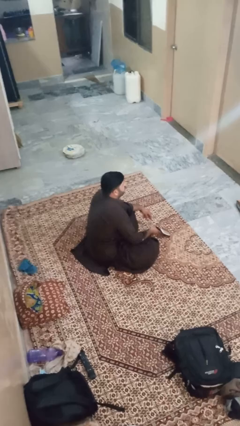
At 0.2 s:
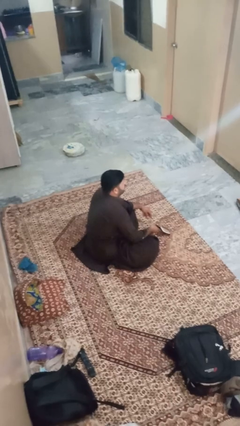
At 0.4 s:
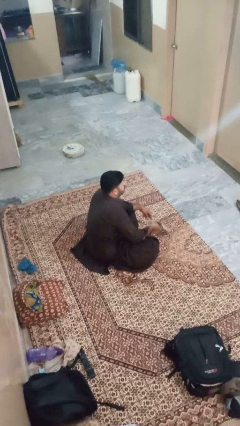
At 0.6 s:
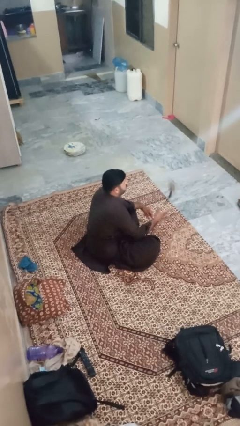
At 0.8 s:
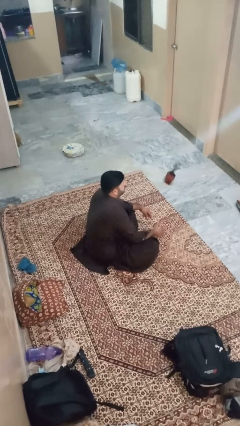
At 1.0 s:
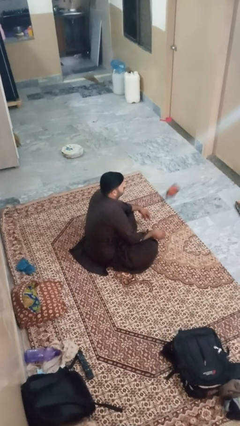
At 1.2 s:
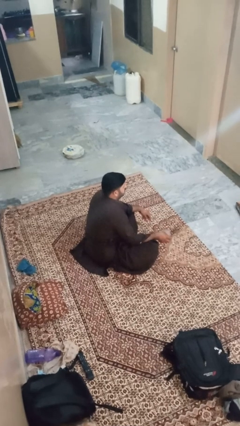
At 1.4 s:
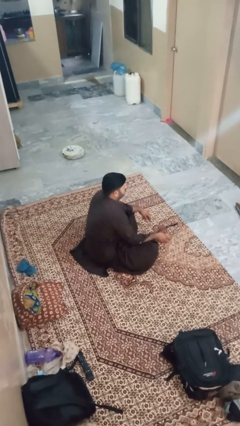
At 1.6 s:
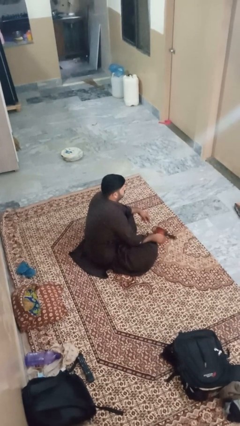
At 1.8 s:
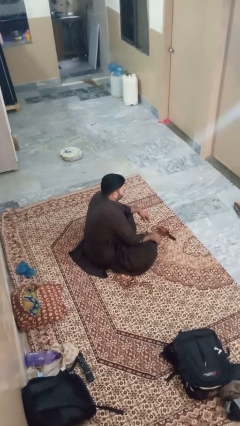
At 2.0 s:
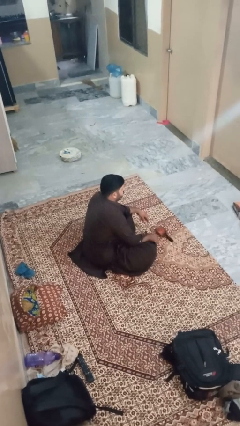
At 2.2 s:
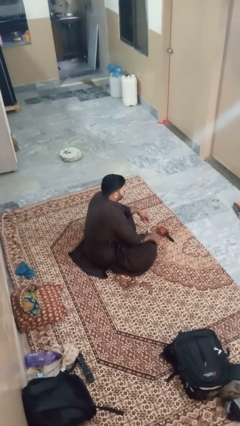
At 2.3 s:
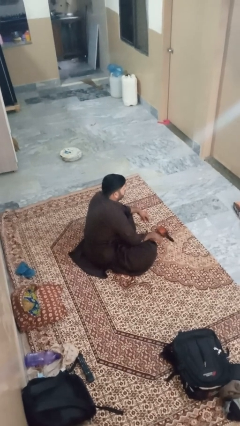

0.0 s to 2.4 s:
person throws object into air

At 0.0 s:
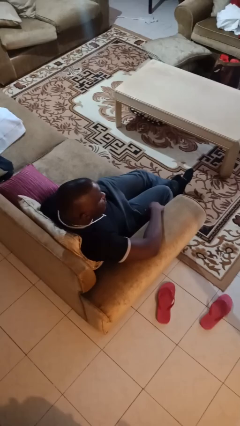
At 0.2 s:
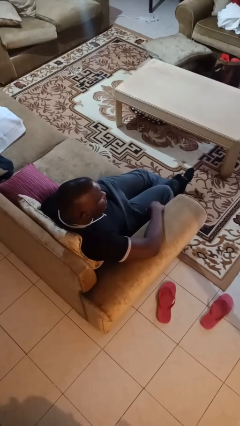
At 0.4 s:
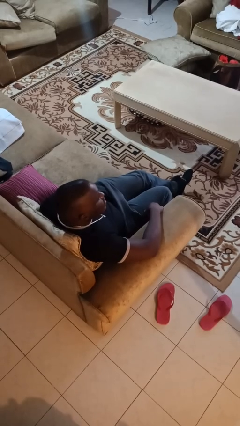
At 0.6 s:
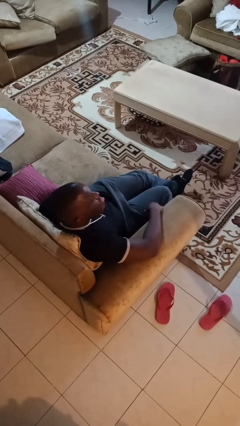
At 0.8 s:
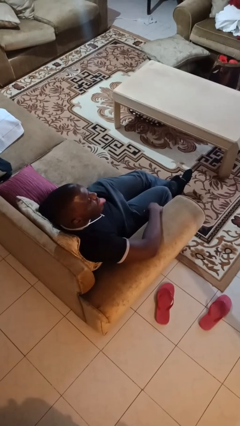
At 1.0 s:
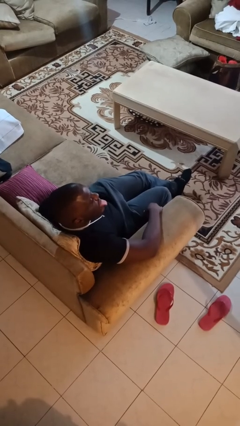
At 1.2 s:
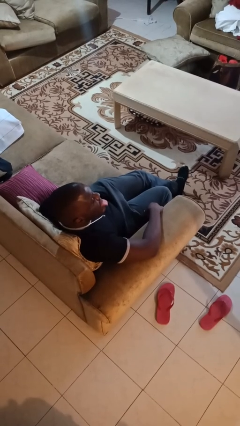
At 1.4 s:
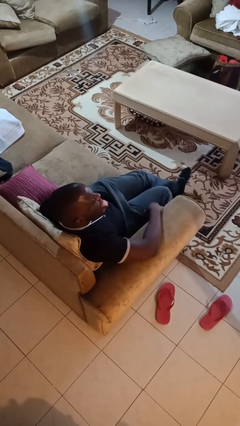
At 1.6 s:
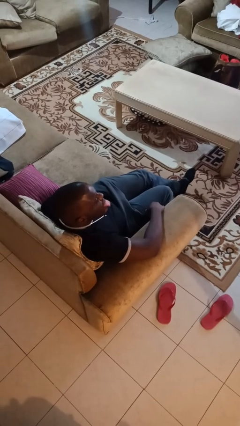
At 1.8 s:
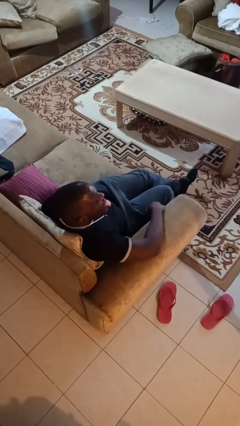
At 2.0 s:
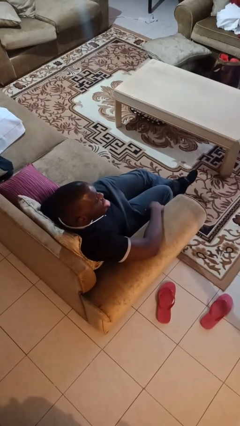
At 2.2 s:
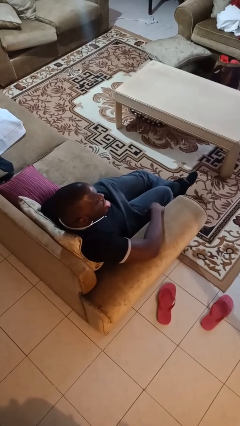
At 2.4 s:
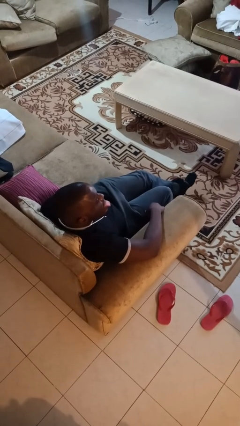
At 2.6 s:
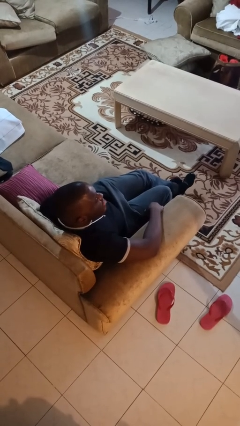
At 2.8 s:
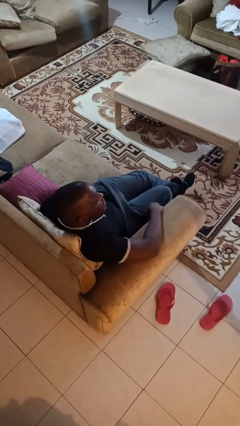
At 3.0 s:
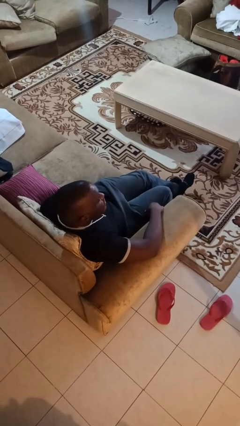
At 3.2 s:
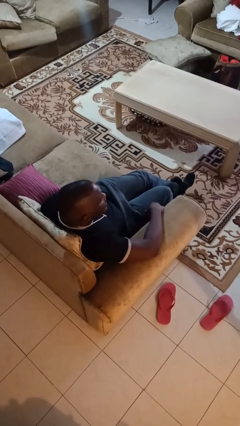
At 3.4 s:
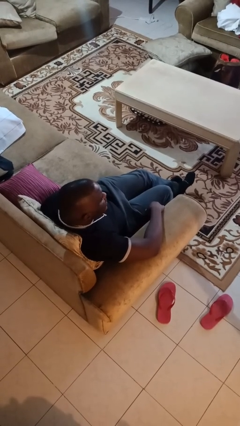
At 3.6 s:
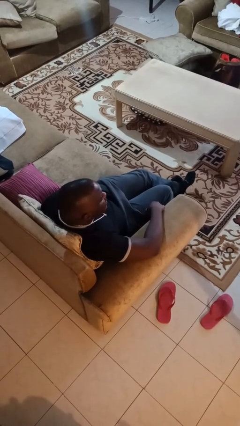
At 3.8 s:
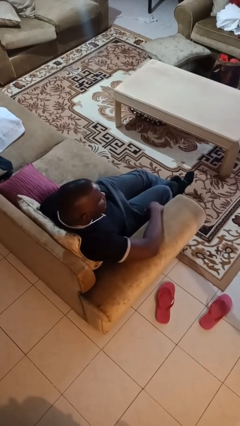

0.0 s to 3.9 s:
person sticks out tongue

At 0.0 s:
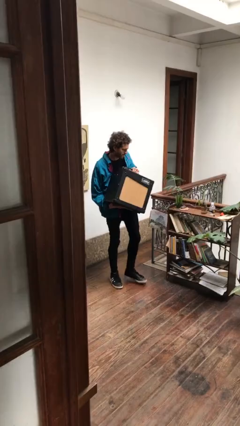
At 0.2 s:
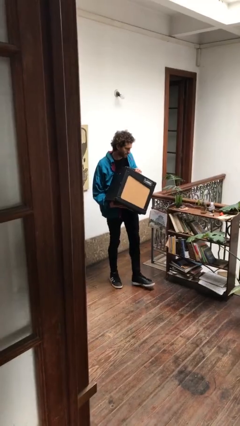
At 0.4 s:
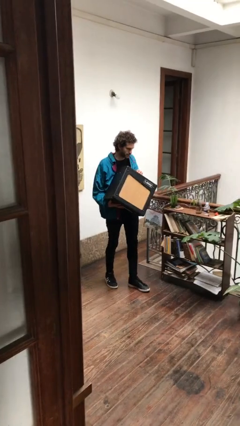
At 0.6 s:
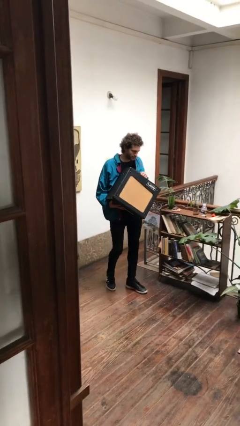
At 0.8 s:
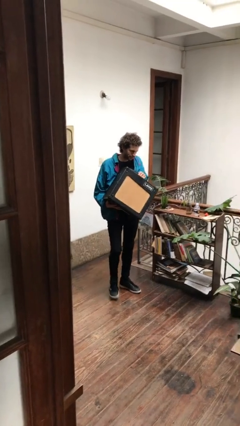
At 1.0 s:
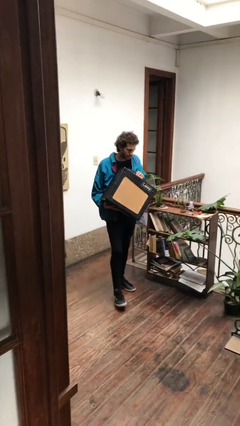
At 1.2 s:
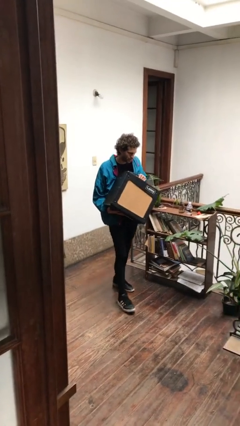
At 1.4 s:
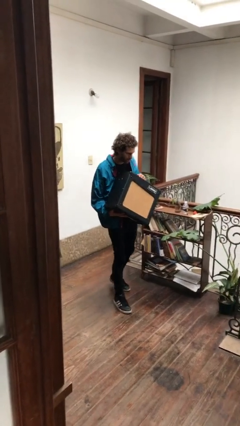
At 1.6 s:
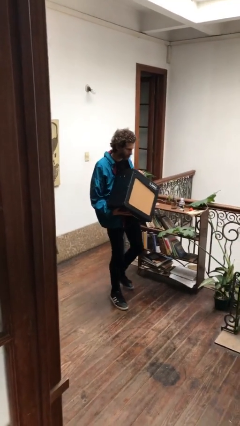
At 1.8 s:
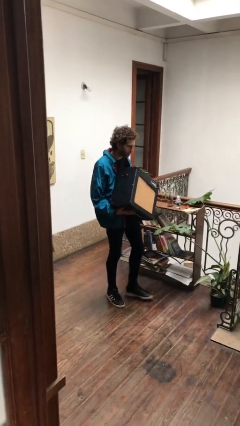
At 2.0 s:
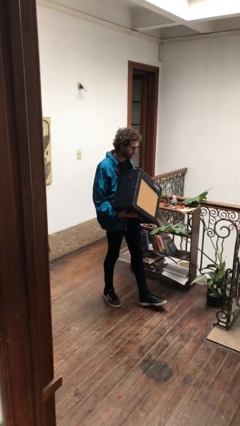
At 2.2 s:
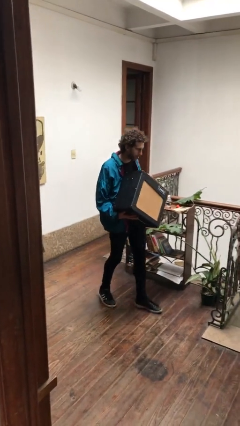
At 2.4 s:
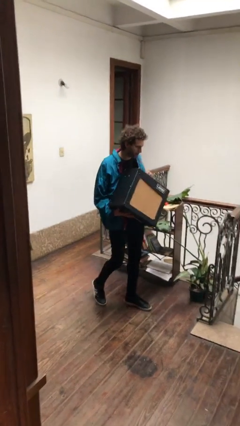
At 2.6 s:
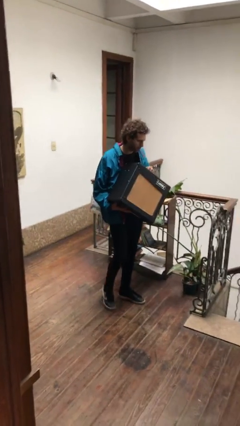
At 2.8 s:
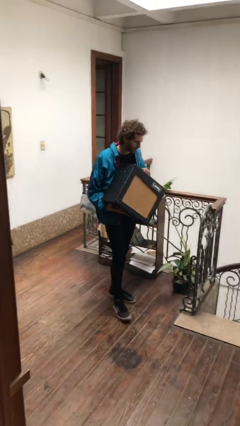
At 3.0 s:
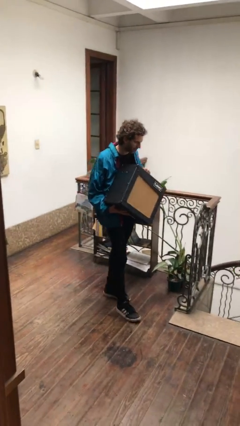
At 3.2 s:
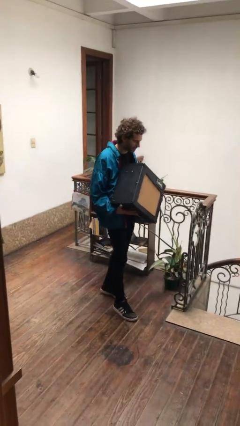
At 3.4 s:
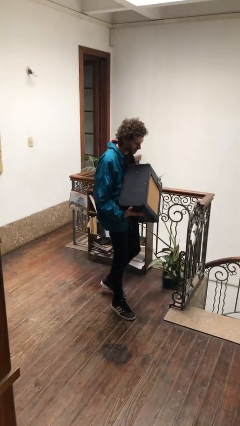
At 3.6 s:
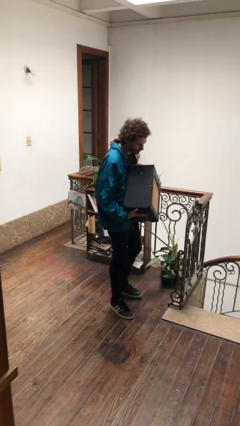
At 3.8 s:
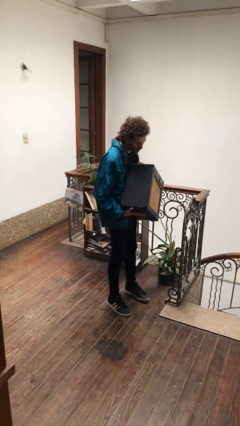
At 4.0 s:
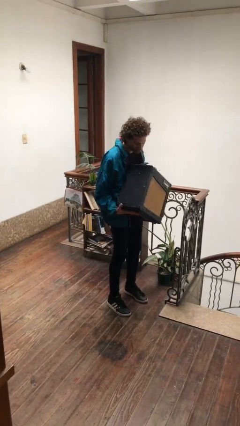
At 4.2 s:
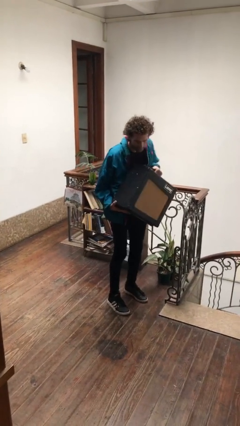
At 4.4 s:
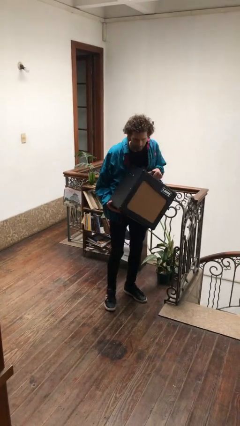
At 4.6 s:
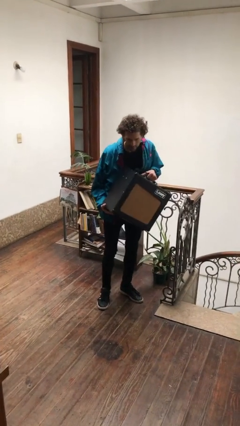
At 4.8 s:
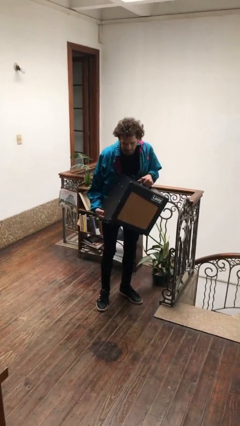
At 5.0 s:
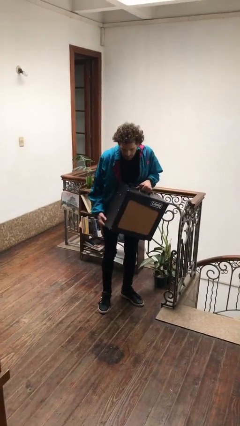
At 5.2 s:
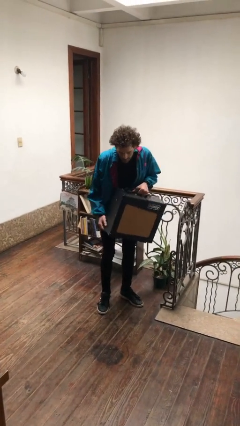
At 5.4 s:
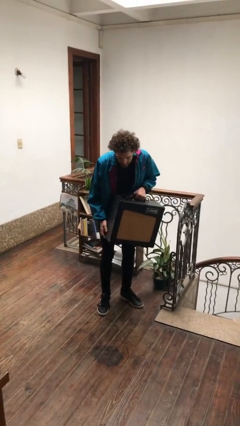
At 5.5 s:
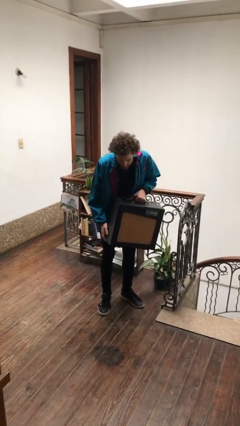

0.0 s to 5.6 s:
person carries heavy object

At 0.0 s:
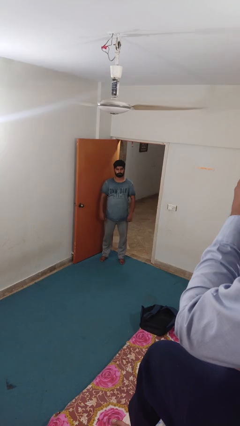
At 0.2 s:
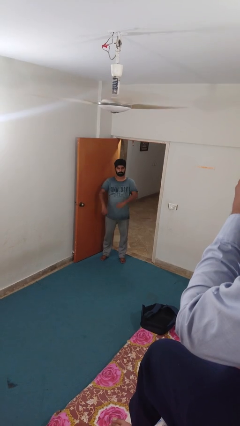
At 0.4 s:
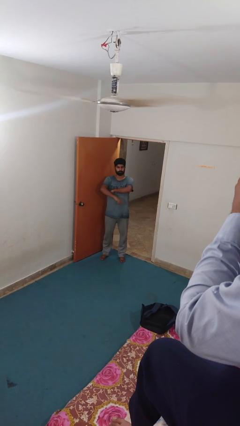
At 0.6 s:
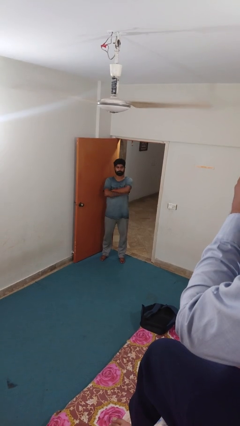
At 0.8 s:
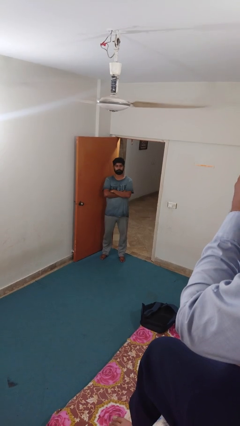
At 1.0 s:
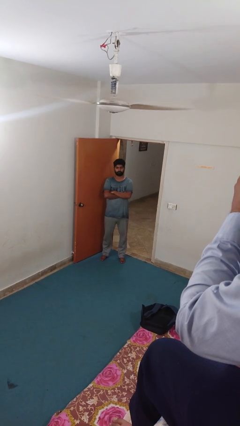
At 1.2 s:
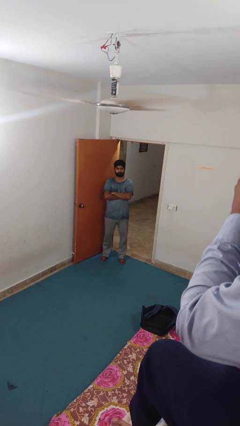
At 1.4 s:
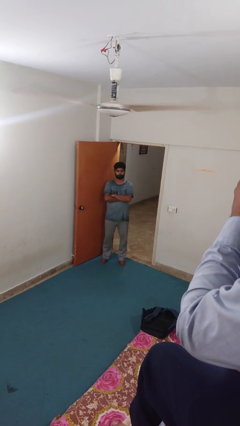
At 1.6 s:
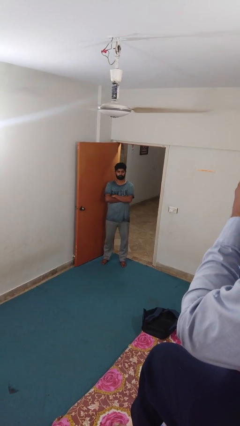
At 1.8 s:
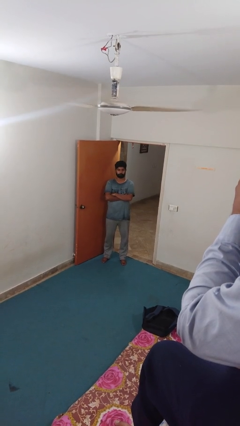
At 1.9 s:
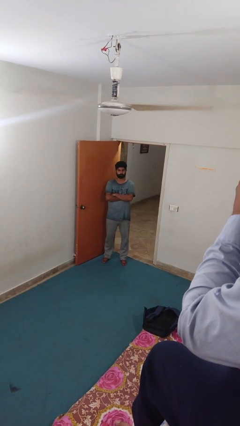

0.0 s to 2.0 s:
person crosses arms

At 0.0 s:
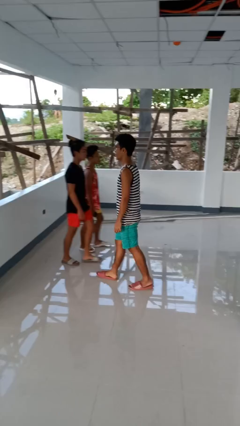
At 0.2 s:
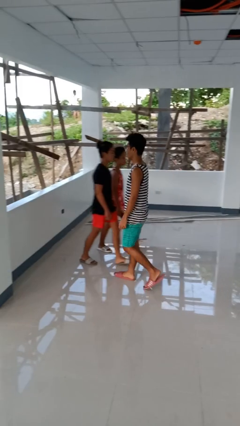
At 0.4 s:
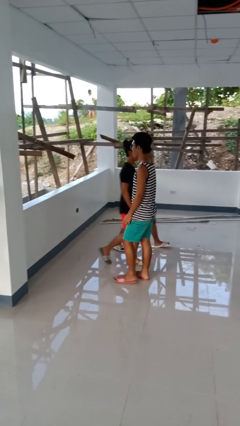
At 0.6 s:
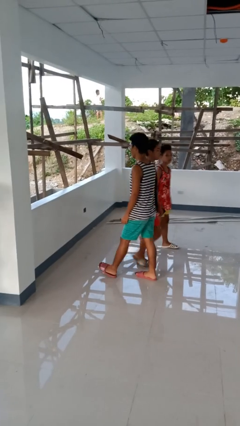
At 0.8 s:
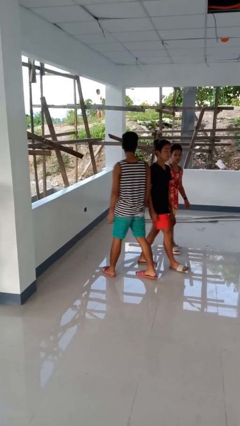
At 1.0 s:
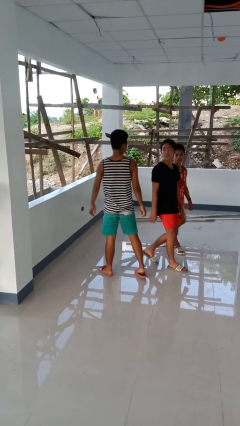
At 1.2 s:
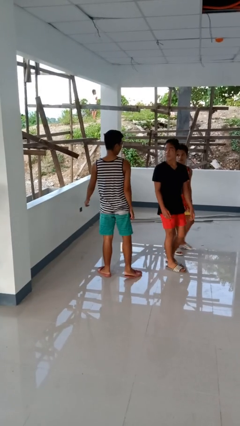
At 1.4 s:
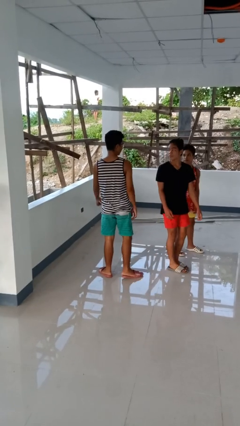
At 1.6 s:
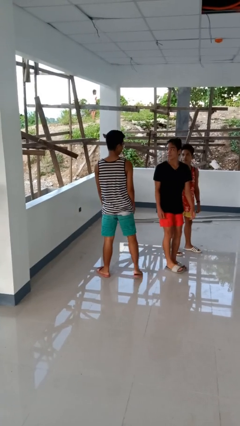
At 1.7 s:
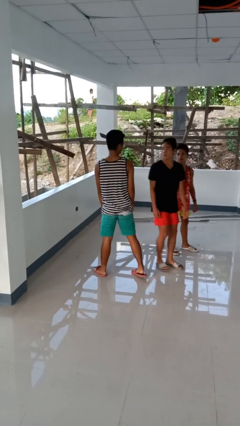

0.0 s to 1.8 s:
person bumps into person

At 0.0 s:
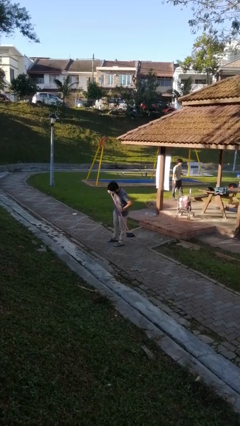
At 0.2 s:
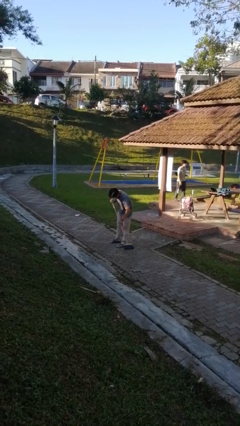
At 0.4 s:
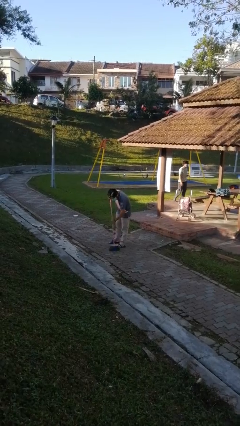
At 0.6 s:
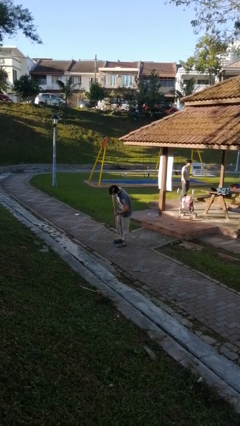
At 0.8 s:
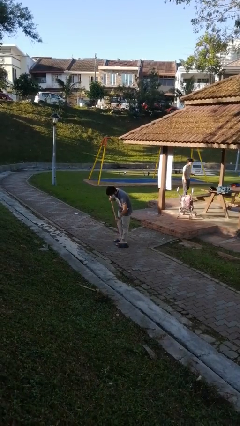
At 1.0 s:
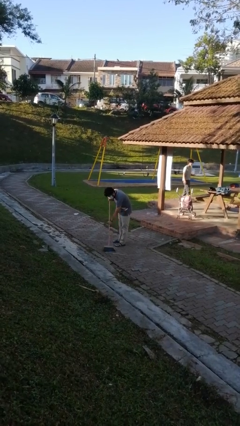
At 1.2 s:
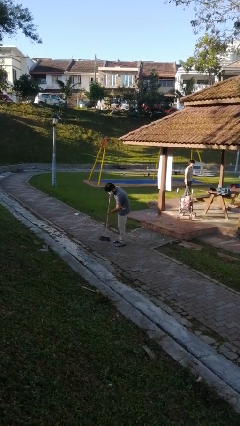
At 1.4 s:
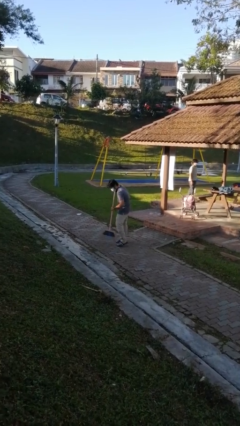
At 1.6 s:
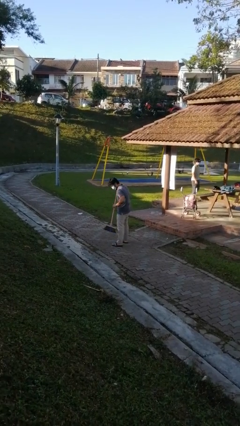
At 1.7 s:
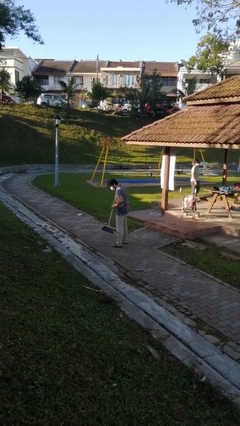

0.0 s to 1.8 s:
person sweeps floor
